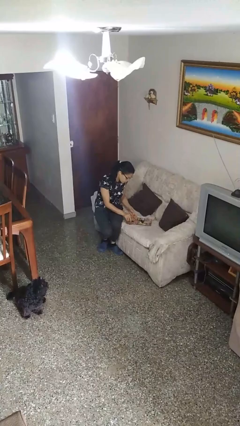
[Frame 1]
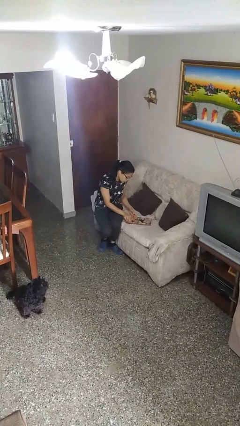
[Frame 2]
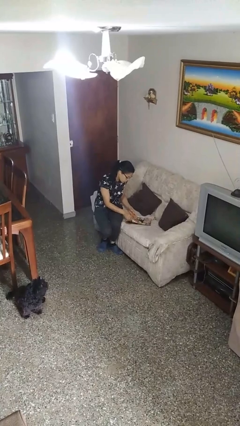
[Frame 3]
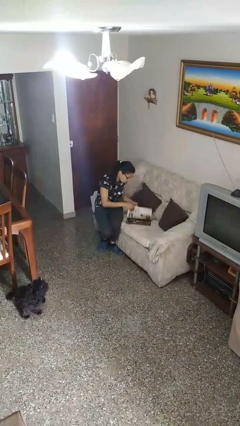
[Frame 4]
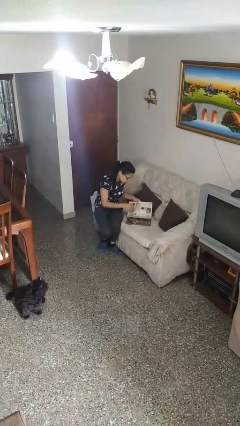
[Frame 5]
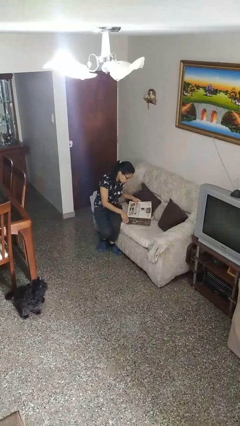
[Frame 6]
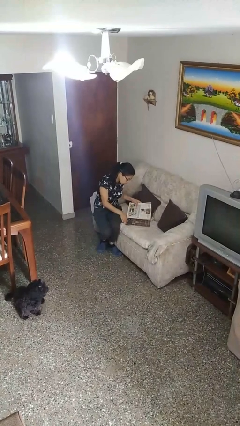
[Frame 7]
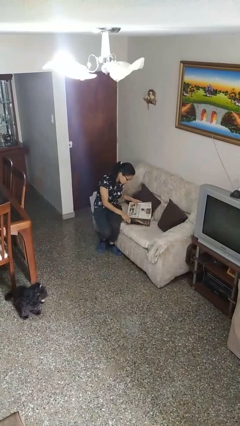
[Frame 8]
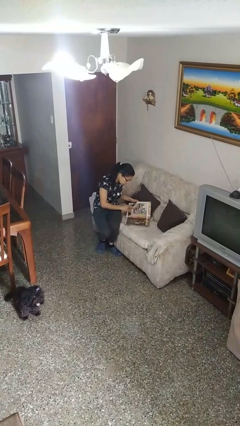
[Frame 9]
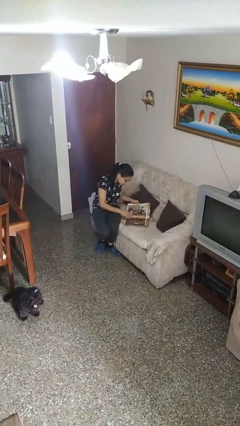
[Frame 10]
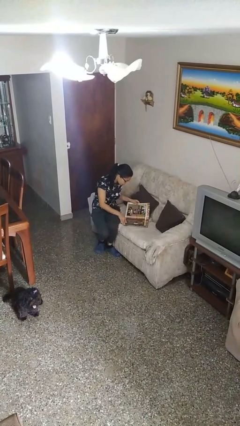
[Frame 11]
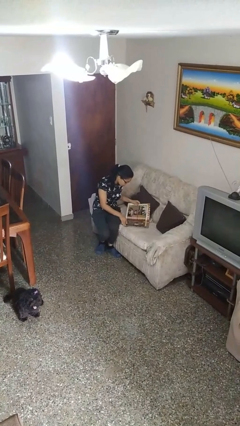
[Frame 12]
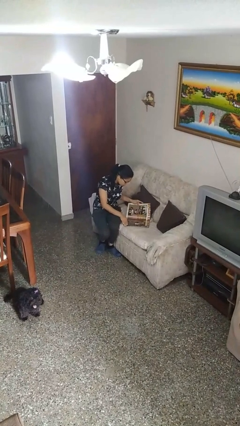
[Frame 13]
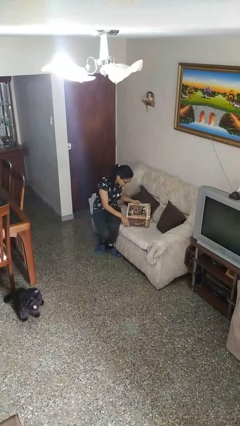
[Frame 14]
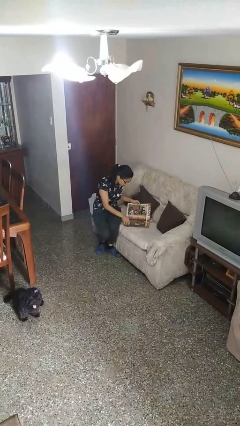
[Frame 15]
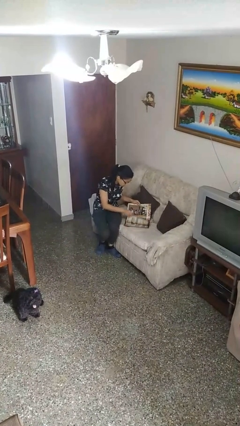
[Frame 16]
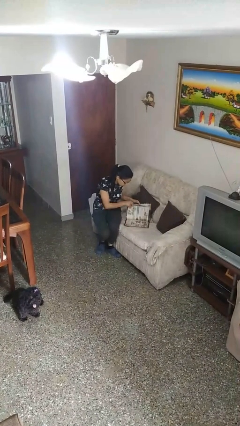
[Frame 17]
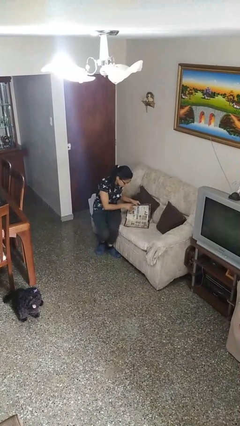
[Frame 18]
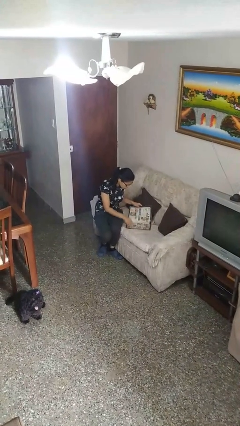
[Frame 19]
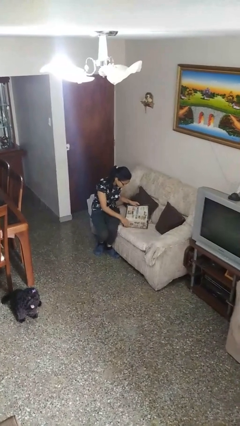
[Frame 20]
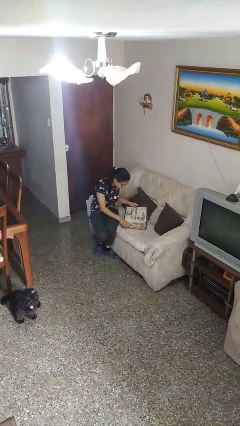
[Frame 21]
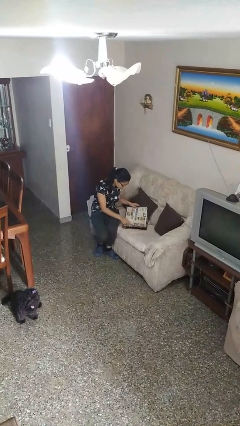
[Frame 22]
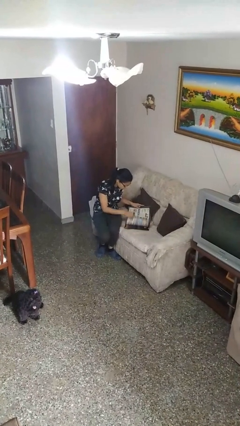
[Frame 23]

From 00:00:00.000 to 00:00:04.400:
person reads magazine

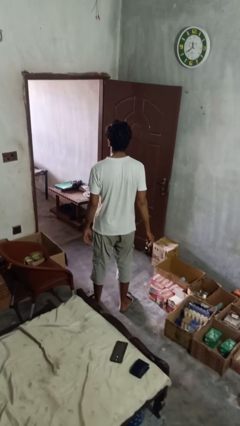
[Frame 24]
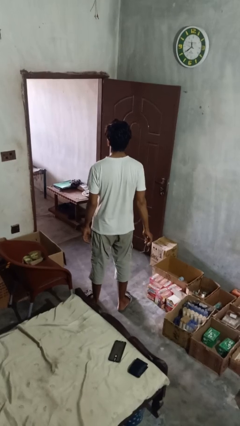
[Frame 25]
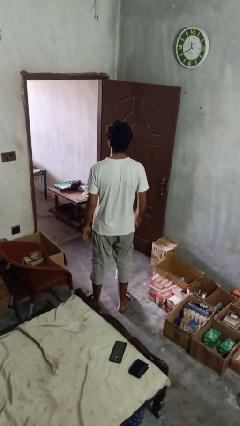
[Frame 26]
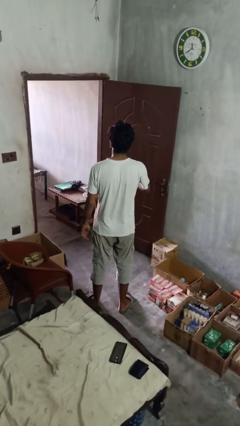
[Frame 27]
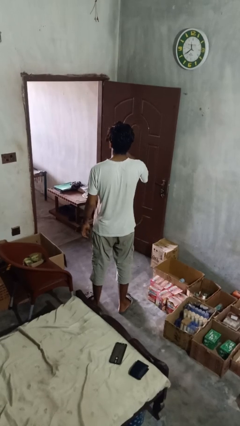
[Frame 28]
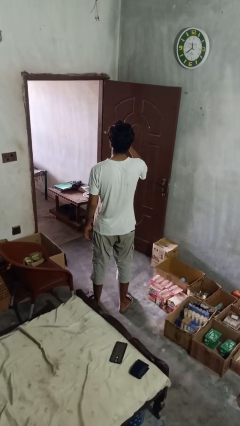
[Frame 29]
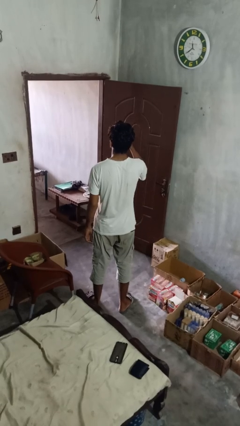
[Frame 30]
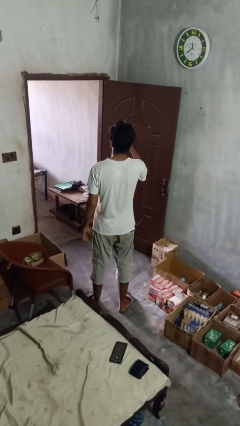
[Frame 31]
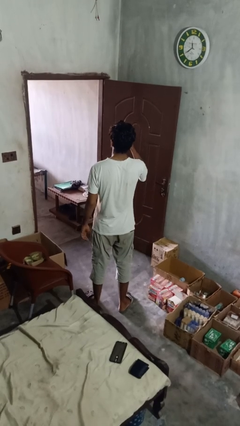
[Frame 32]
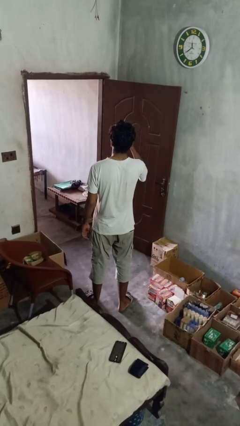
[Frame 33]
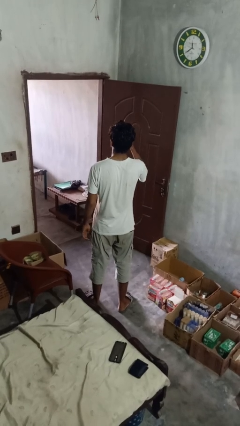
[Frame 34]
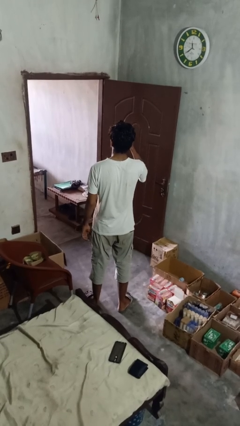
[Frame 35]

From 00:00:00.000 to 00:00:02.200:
person puts on glasses

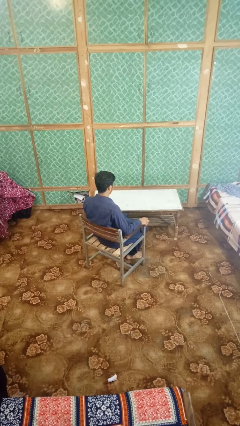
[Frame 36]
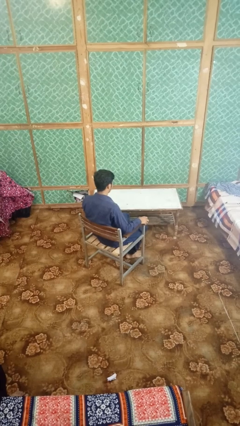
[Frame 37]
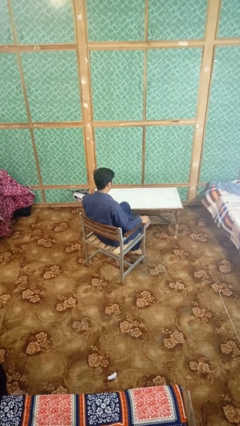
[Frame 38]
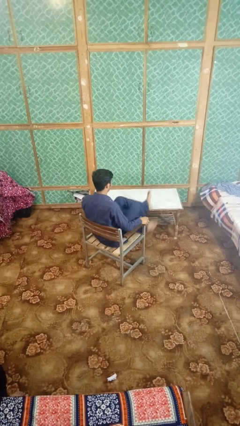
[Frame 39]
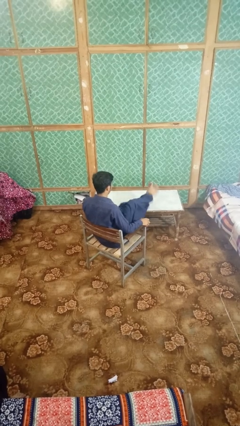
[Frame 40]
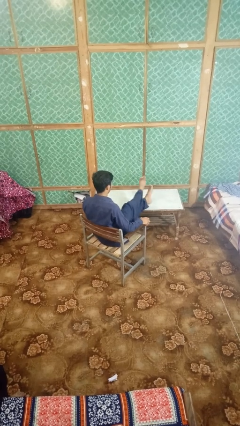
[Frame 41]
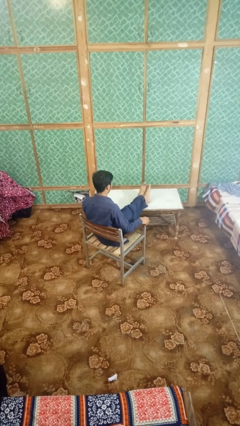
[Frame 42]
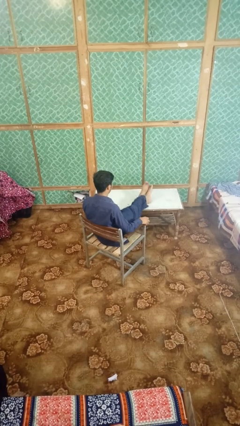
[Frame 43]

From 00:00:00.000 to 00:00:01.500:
person puts feet up

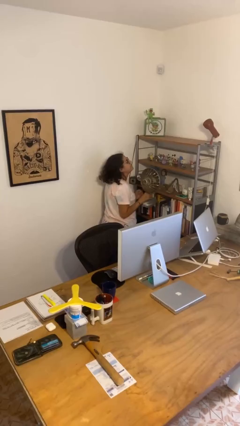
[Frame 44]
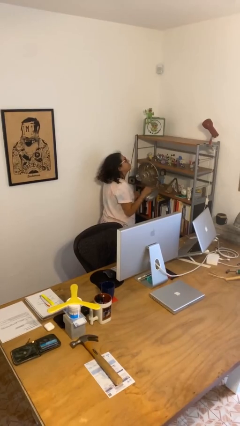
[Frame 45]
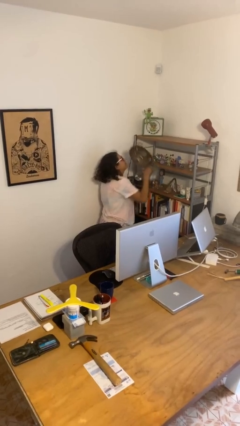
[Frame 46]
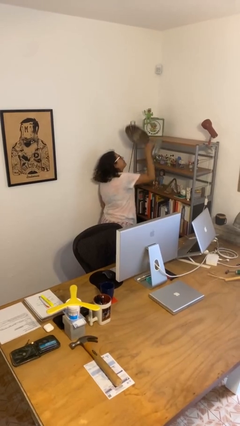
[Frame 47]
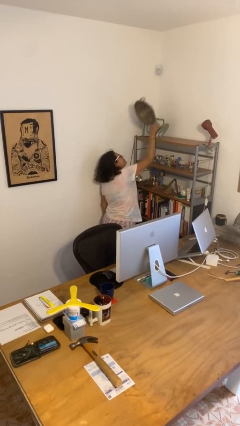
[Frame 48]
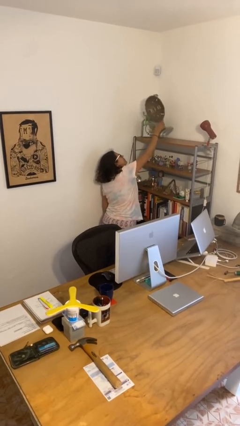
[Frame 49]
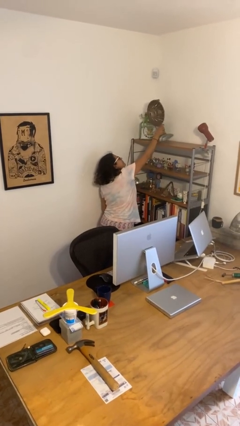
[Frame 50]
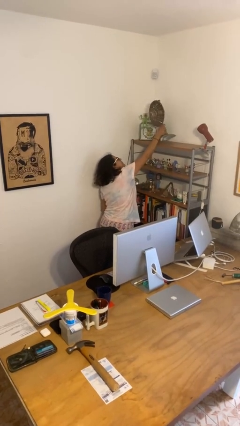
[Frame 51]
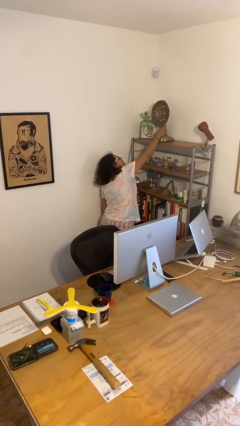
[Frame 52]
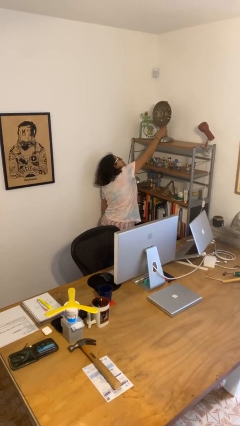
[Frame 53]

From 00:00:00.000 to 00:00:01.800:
person puts down object on shelf

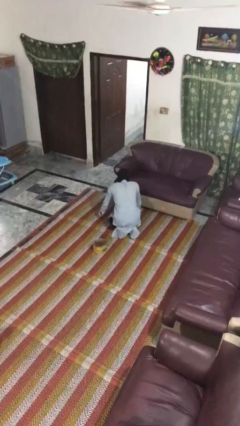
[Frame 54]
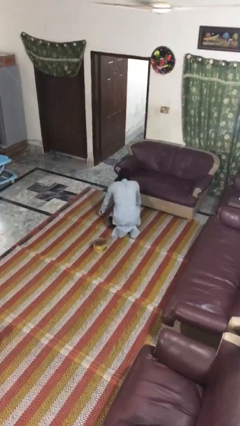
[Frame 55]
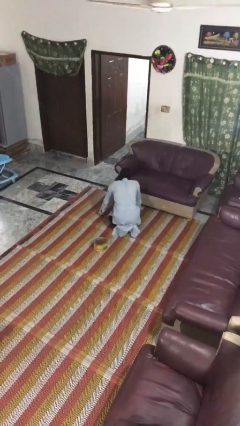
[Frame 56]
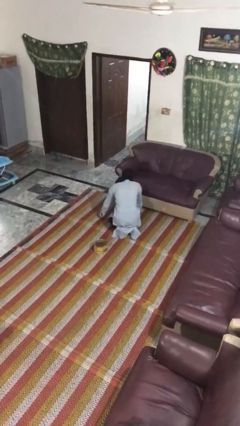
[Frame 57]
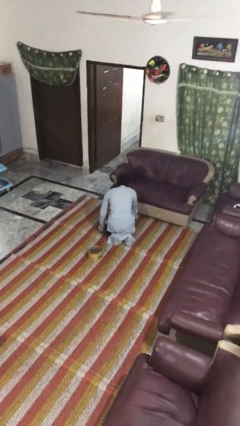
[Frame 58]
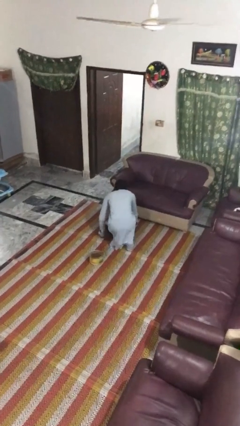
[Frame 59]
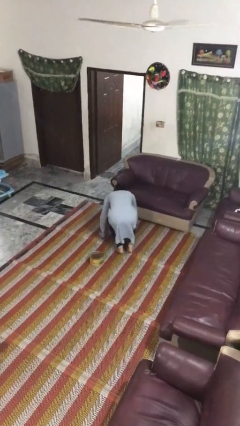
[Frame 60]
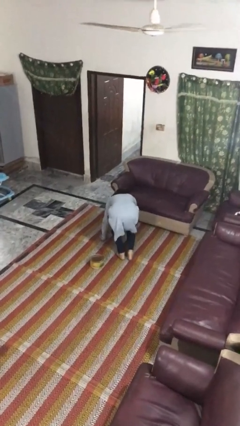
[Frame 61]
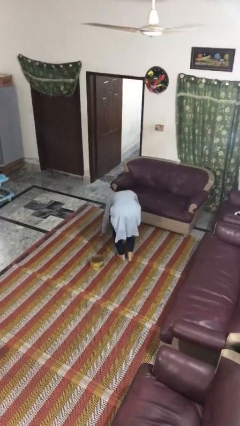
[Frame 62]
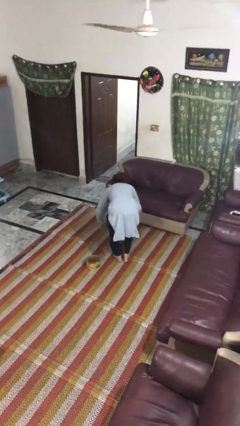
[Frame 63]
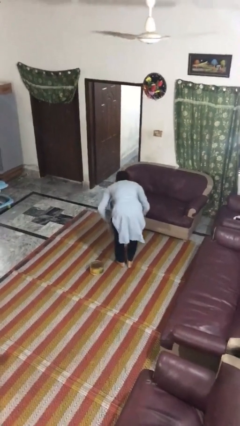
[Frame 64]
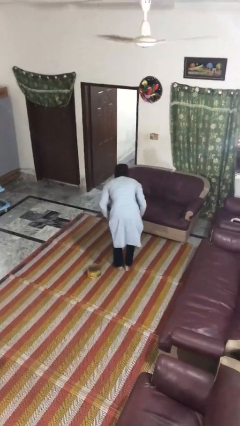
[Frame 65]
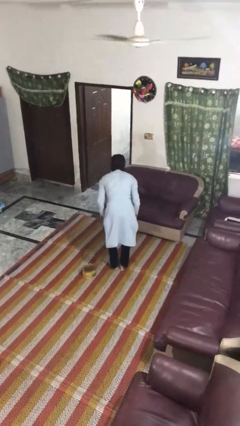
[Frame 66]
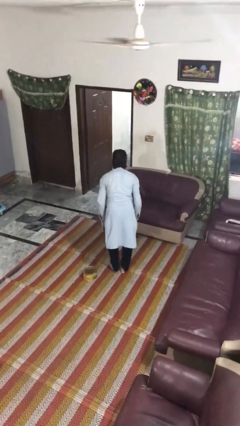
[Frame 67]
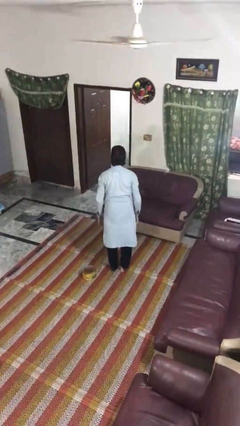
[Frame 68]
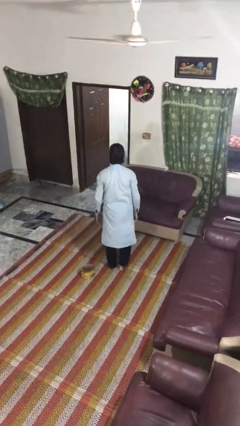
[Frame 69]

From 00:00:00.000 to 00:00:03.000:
person stands up from floor

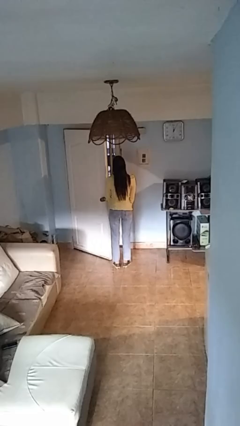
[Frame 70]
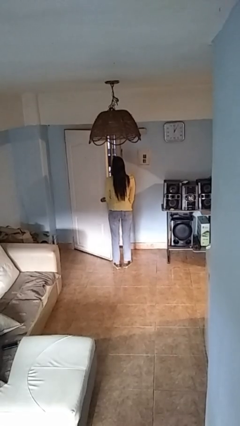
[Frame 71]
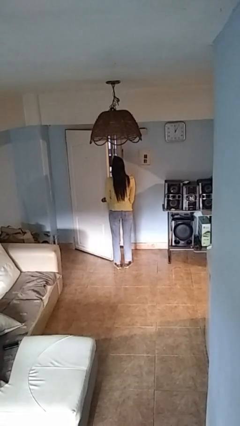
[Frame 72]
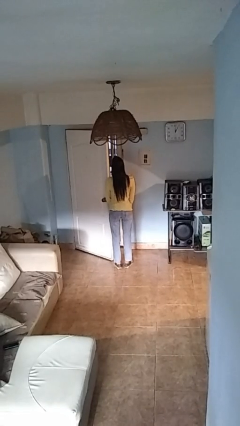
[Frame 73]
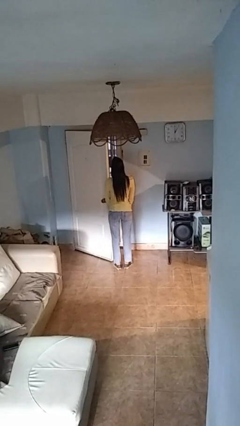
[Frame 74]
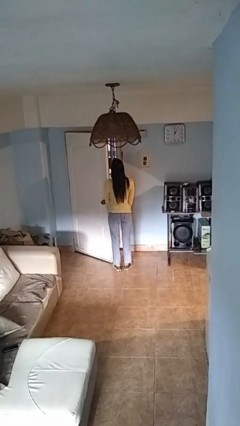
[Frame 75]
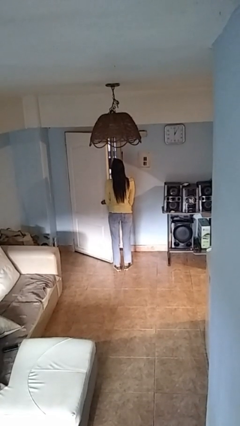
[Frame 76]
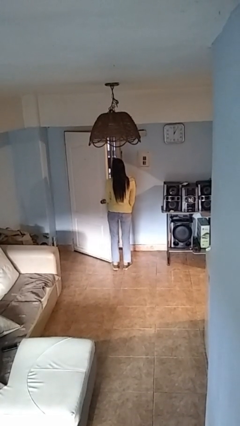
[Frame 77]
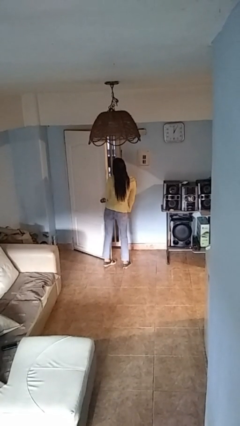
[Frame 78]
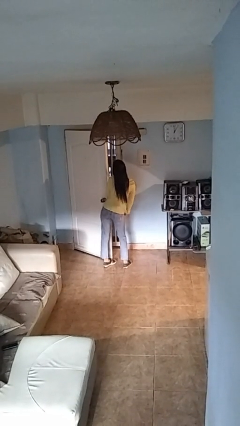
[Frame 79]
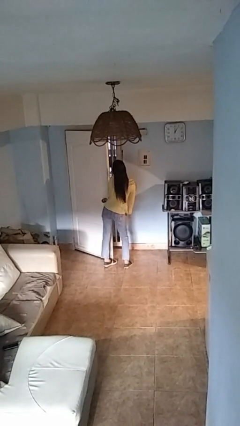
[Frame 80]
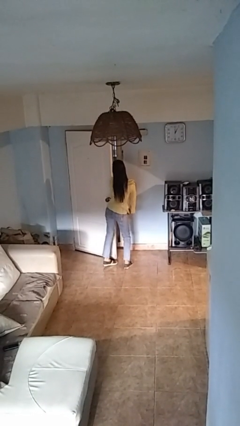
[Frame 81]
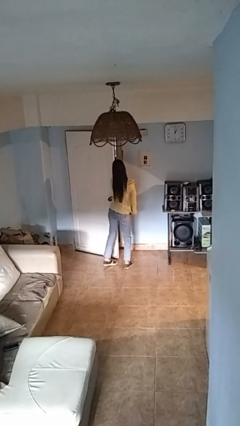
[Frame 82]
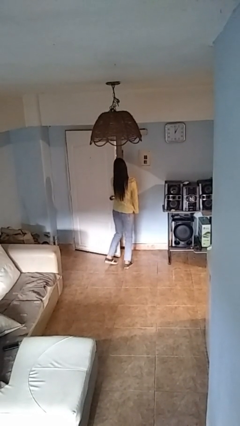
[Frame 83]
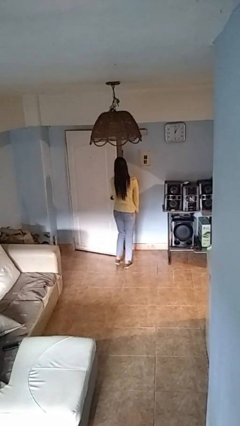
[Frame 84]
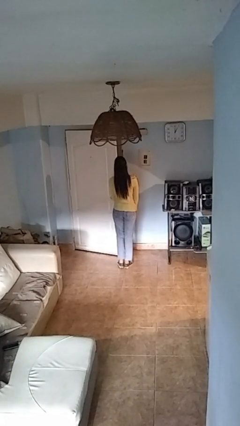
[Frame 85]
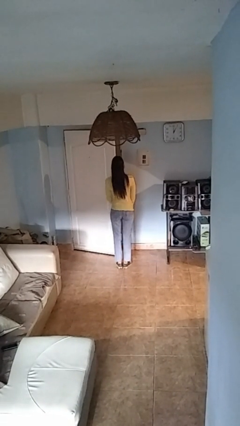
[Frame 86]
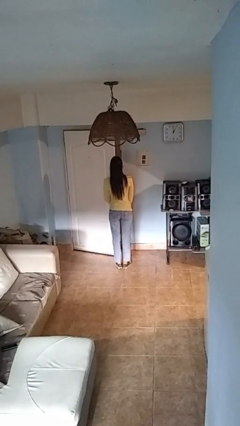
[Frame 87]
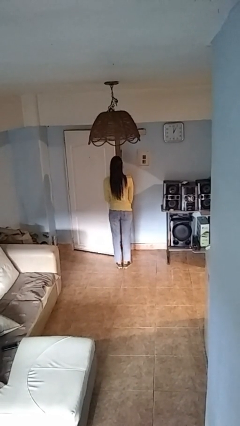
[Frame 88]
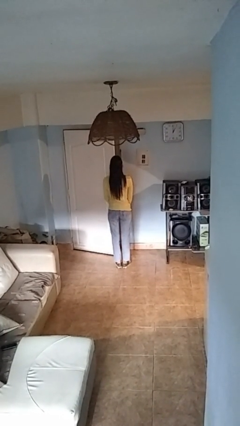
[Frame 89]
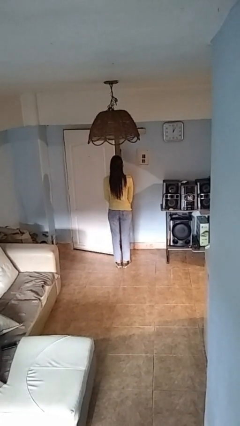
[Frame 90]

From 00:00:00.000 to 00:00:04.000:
person closes door with hip

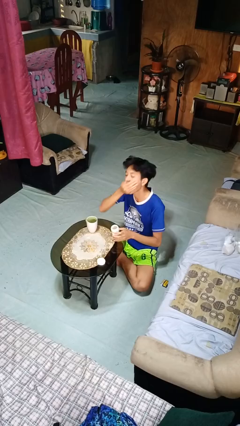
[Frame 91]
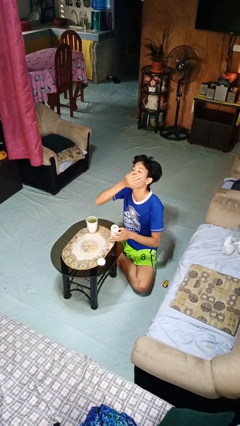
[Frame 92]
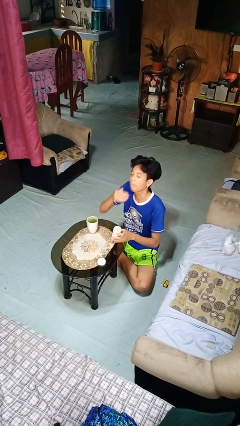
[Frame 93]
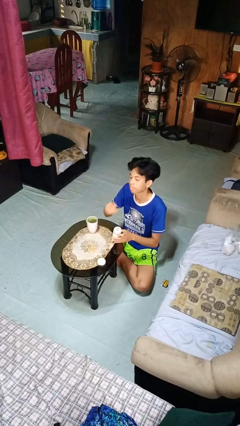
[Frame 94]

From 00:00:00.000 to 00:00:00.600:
person takes medicine pills
